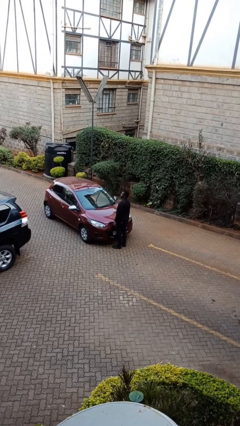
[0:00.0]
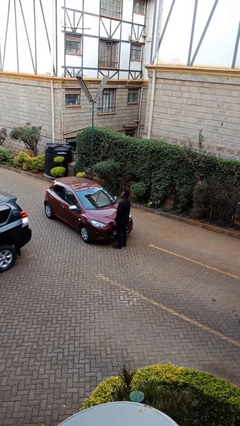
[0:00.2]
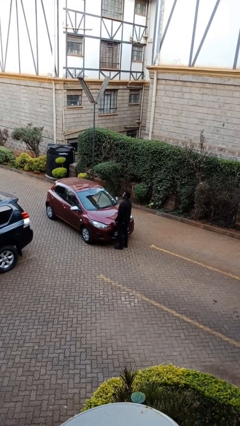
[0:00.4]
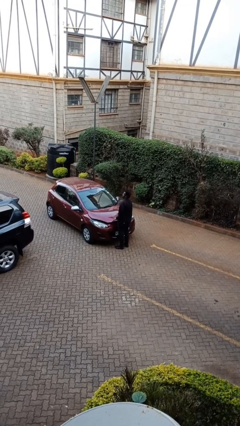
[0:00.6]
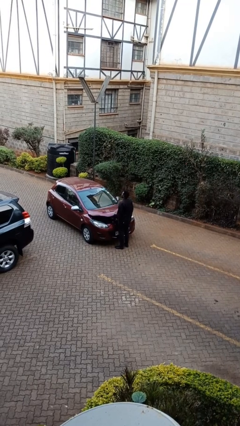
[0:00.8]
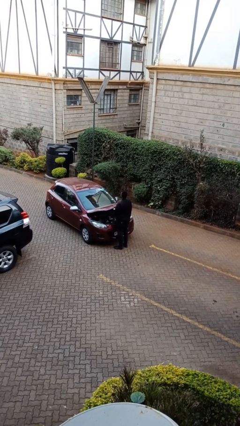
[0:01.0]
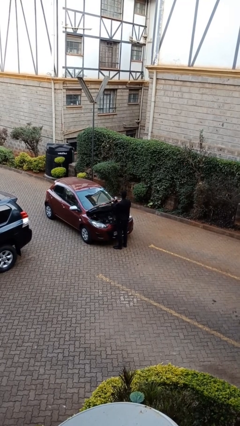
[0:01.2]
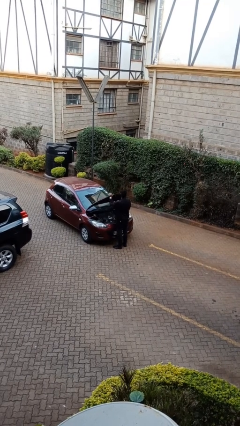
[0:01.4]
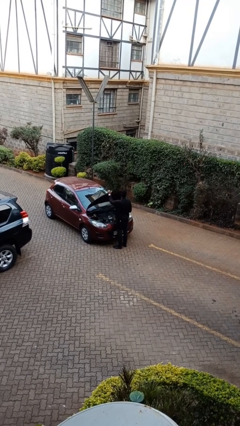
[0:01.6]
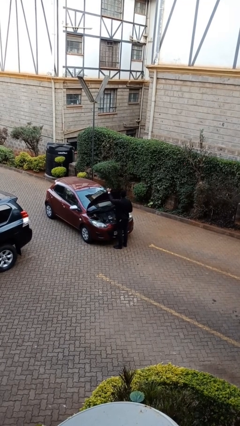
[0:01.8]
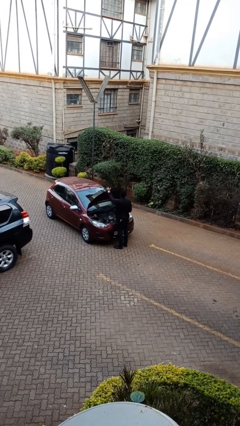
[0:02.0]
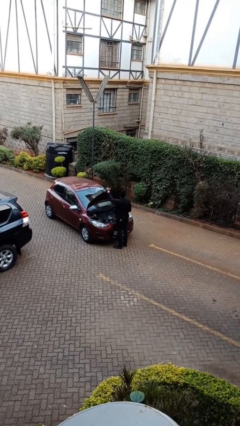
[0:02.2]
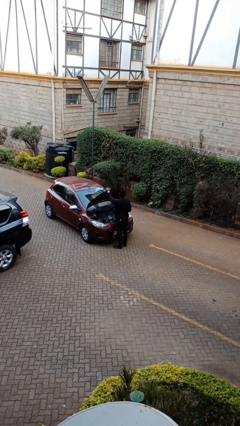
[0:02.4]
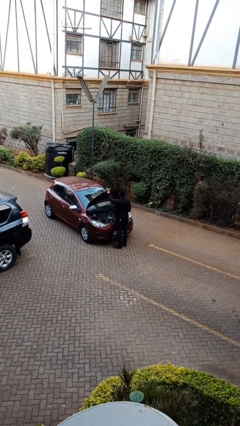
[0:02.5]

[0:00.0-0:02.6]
person opens car hood

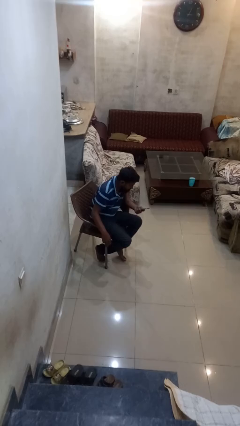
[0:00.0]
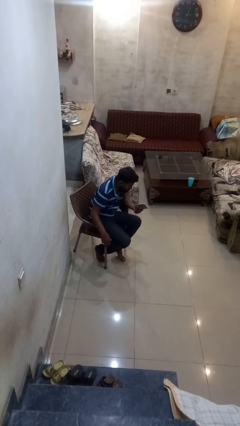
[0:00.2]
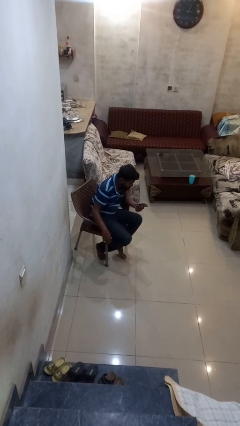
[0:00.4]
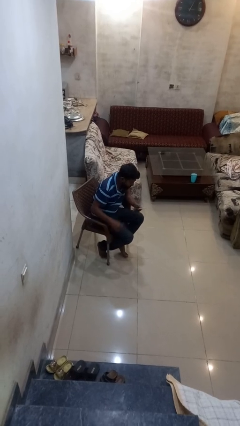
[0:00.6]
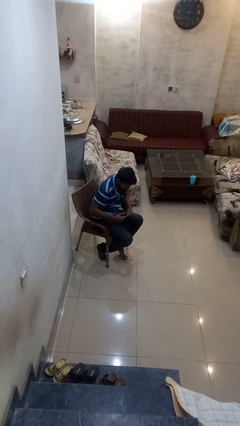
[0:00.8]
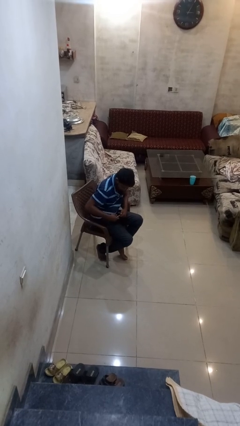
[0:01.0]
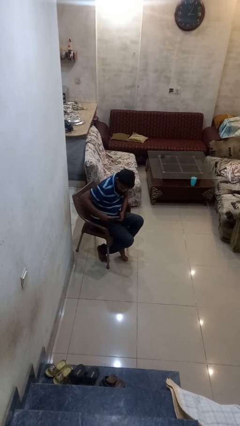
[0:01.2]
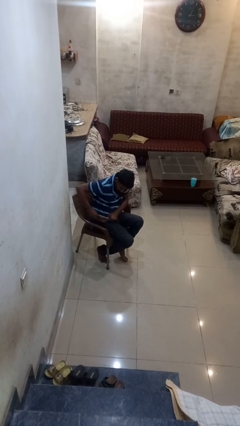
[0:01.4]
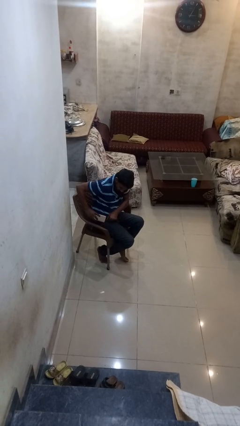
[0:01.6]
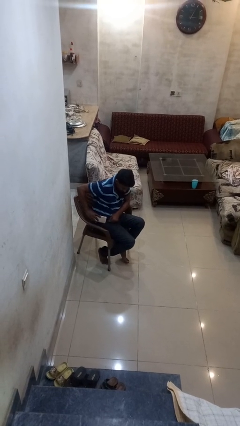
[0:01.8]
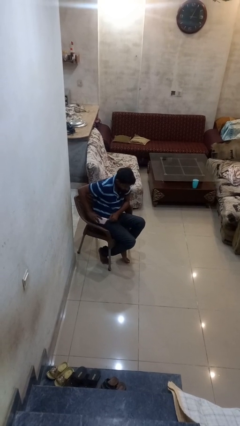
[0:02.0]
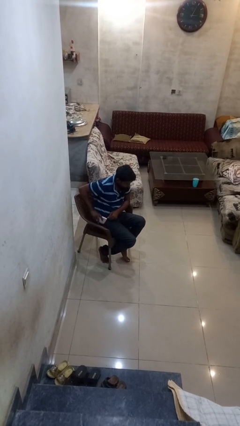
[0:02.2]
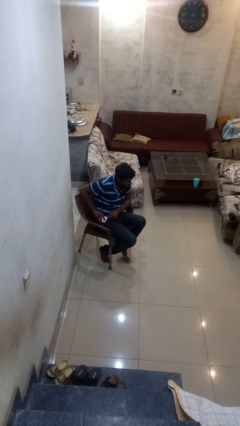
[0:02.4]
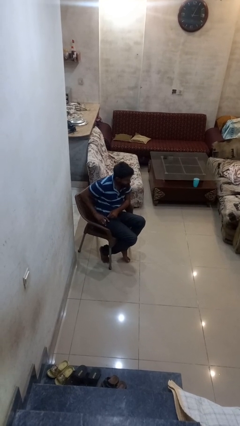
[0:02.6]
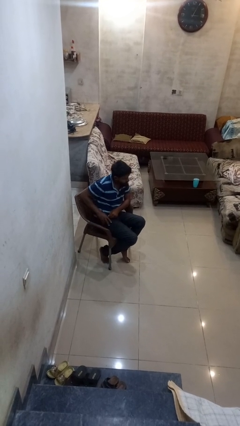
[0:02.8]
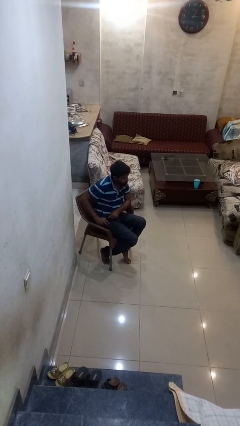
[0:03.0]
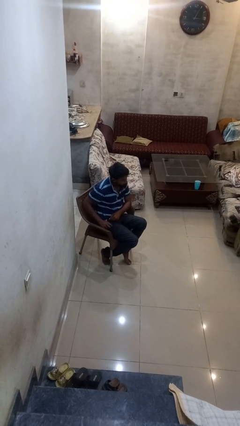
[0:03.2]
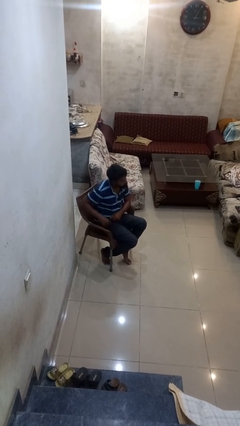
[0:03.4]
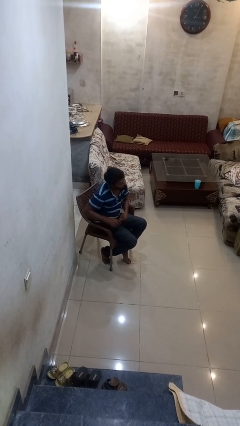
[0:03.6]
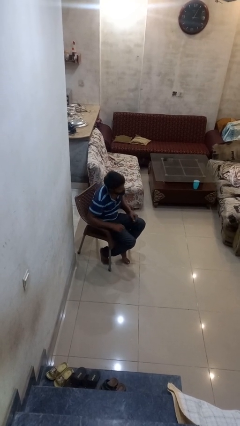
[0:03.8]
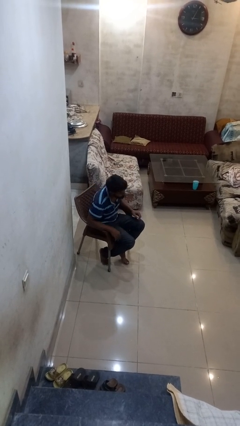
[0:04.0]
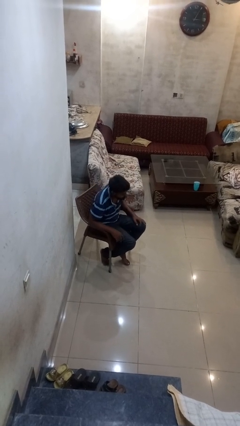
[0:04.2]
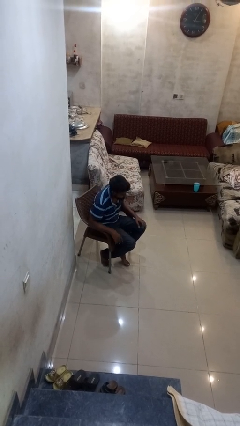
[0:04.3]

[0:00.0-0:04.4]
person puts phone into pocket

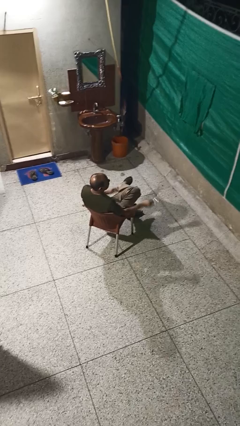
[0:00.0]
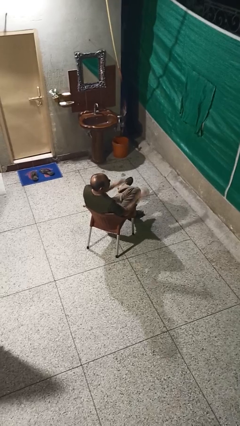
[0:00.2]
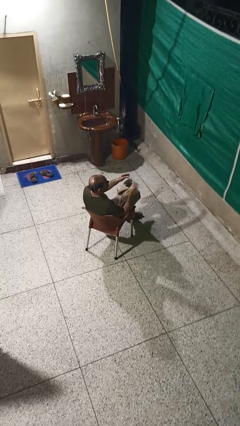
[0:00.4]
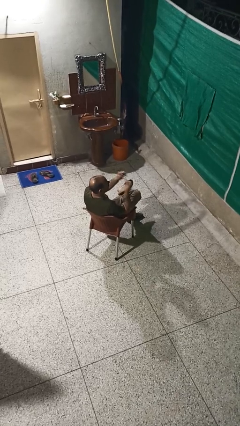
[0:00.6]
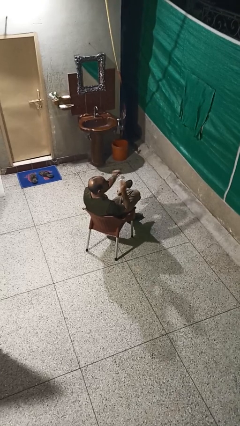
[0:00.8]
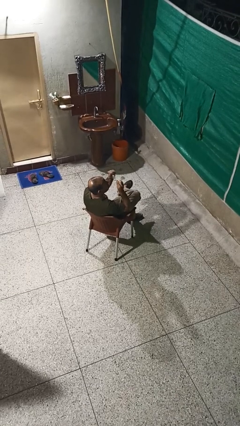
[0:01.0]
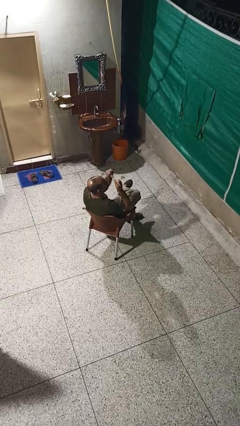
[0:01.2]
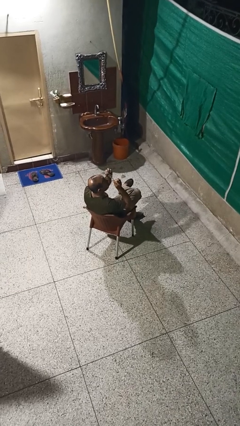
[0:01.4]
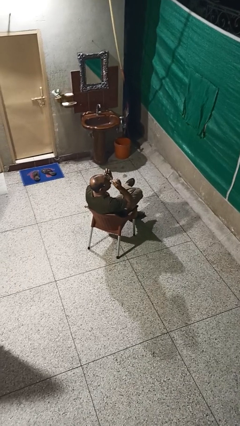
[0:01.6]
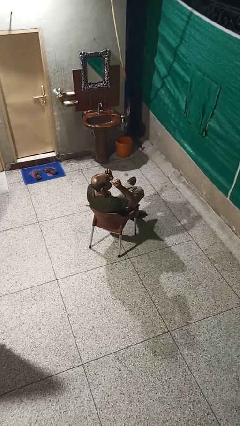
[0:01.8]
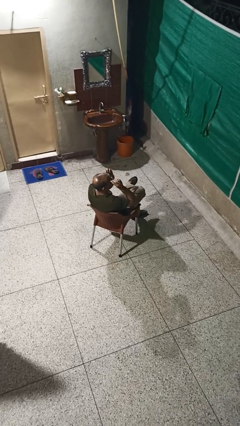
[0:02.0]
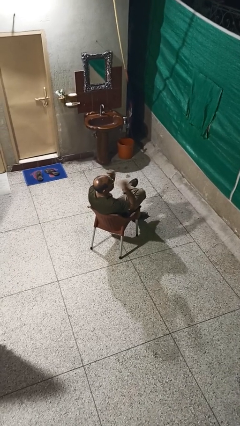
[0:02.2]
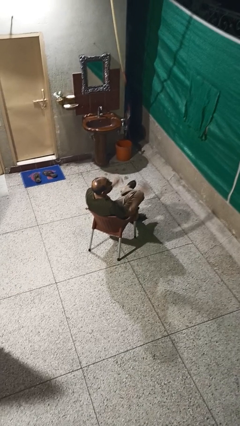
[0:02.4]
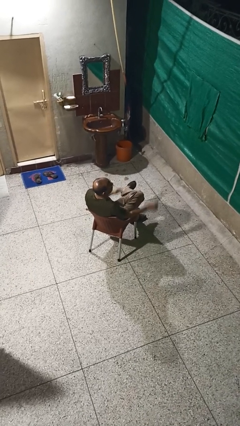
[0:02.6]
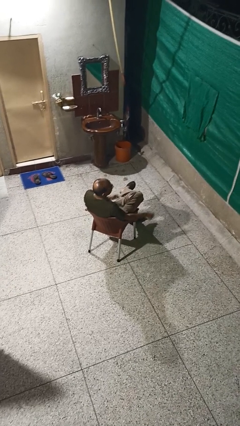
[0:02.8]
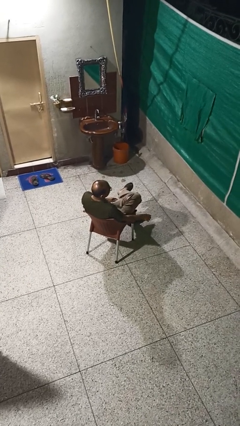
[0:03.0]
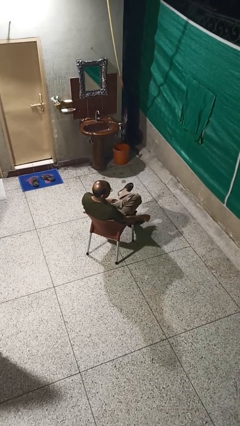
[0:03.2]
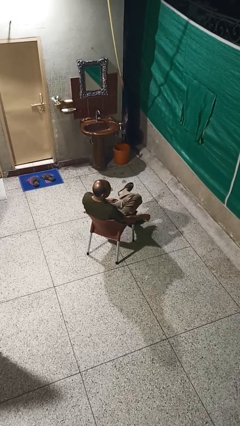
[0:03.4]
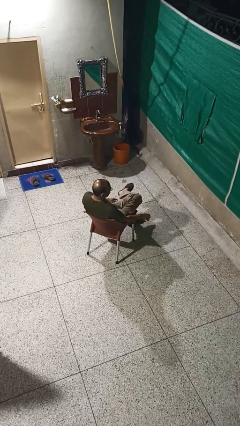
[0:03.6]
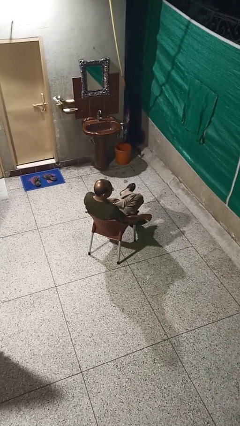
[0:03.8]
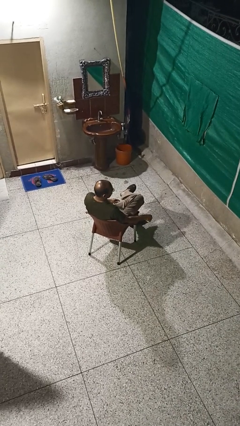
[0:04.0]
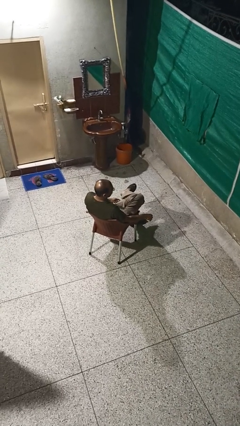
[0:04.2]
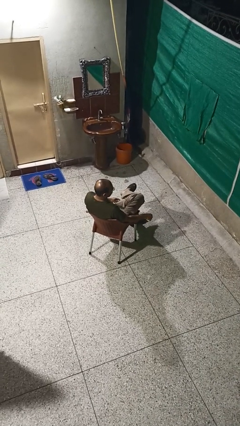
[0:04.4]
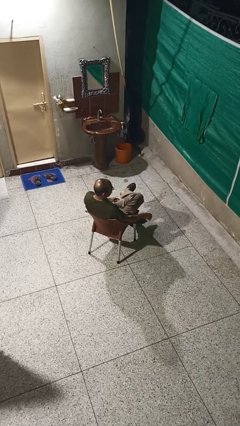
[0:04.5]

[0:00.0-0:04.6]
person puts on glasses

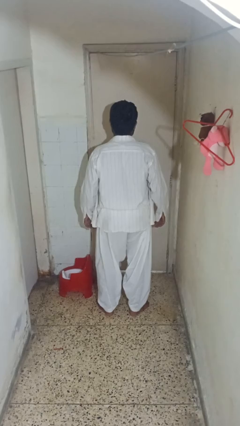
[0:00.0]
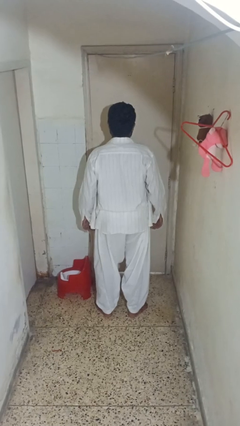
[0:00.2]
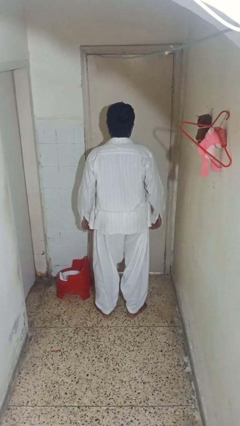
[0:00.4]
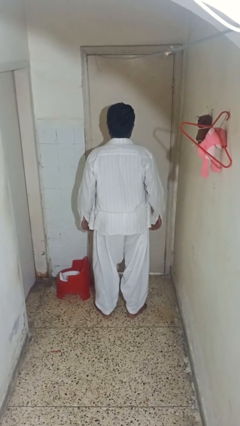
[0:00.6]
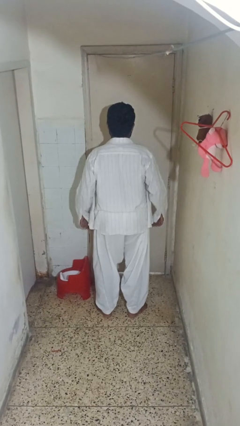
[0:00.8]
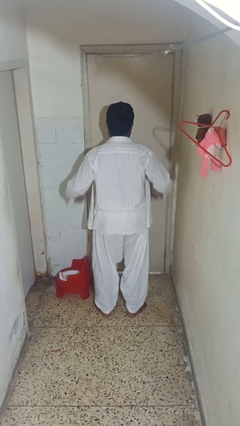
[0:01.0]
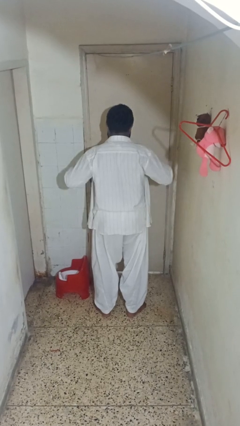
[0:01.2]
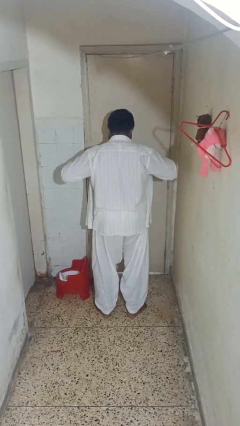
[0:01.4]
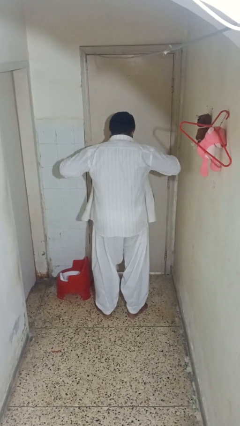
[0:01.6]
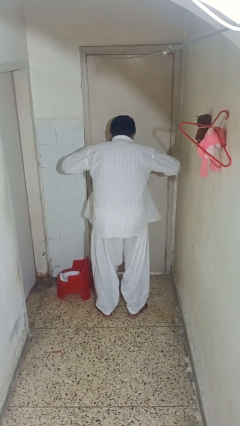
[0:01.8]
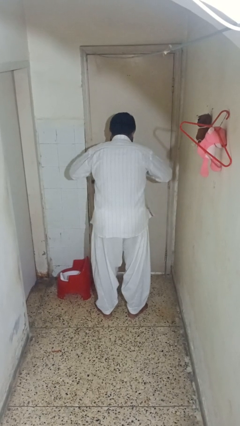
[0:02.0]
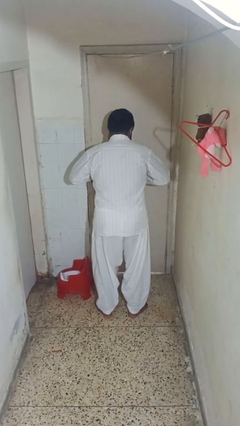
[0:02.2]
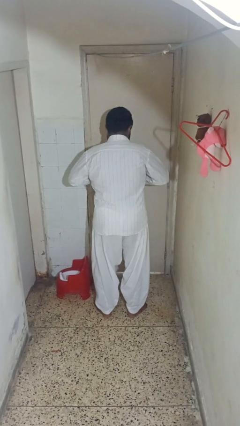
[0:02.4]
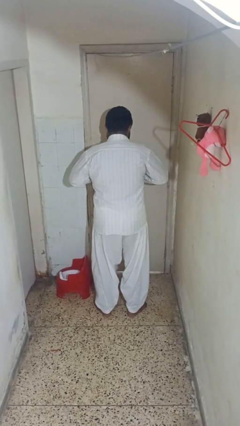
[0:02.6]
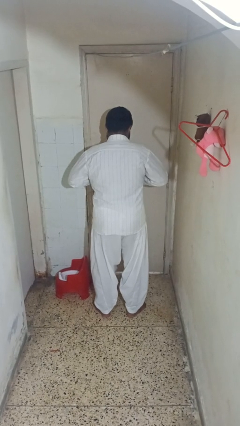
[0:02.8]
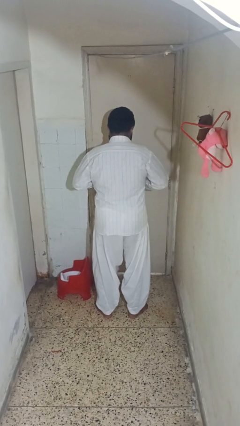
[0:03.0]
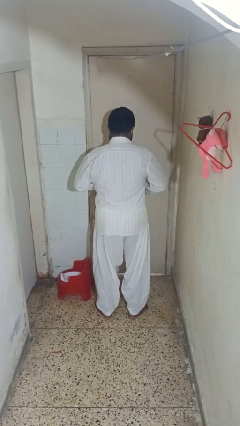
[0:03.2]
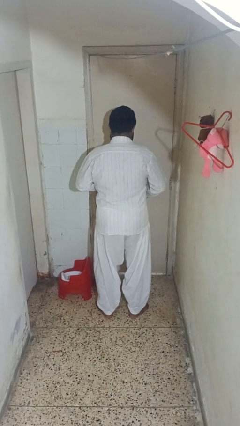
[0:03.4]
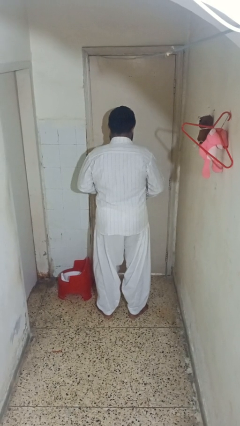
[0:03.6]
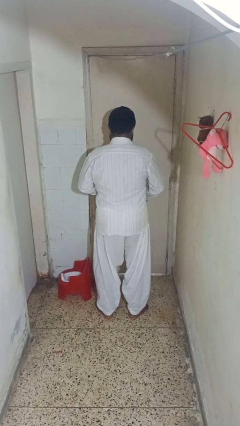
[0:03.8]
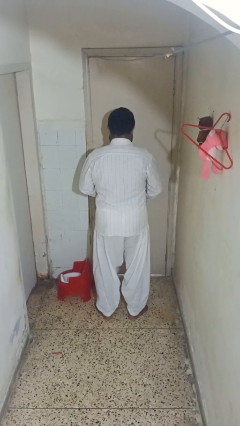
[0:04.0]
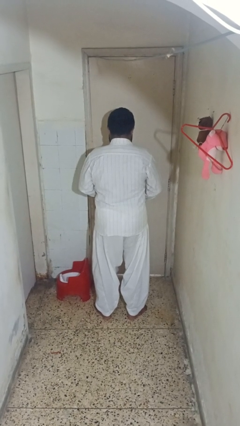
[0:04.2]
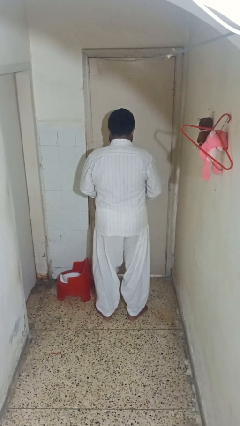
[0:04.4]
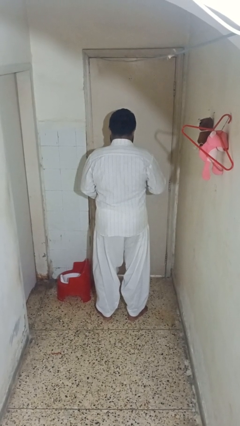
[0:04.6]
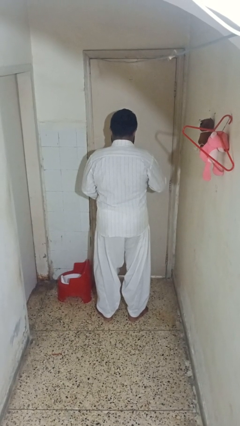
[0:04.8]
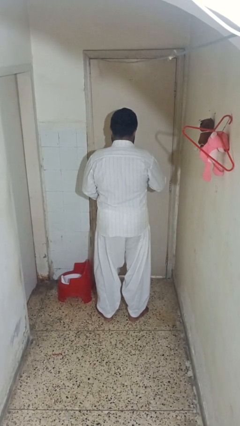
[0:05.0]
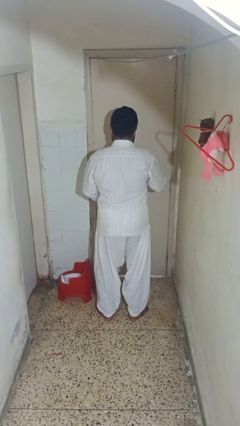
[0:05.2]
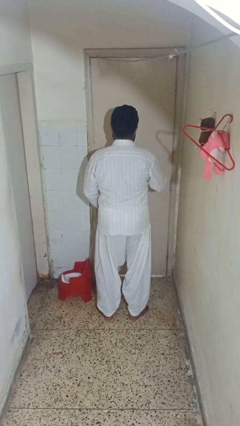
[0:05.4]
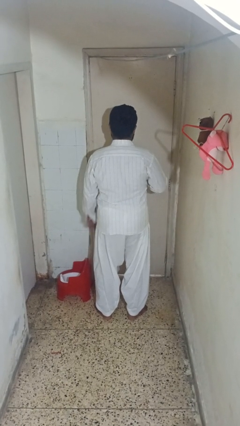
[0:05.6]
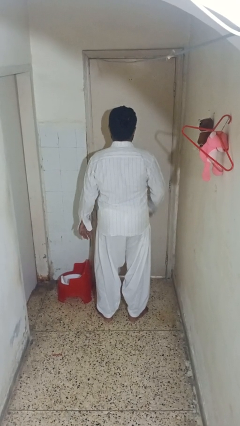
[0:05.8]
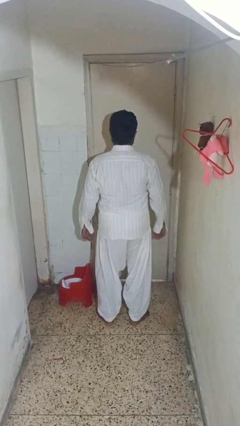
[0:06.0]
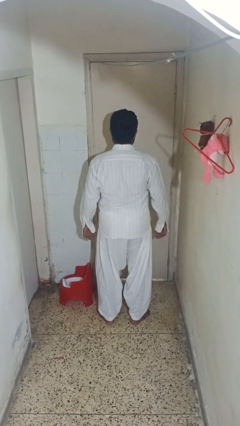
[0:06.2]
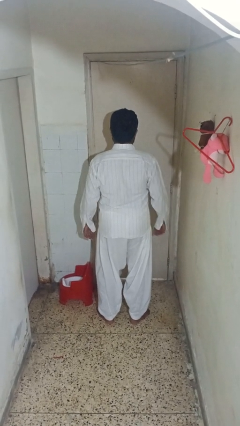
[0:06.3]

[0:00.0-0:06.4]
person buttons shirt
